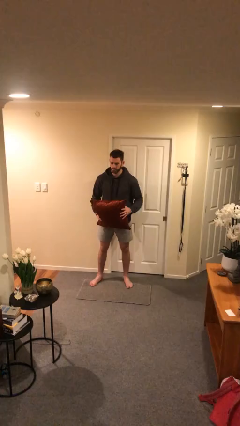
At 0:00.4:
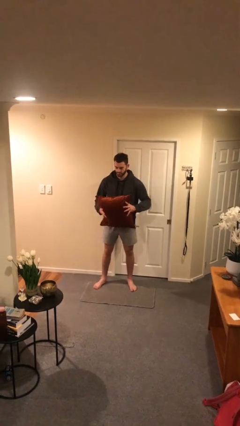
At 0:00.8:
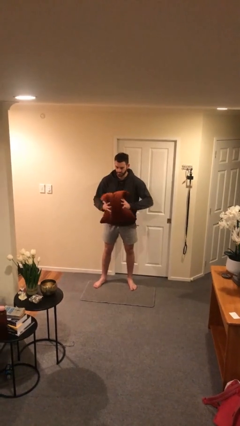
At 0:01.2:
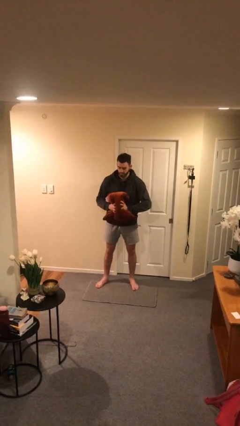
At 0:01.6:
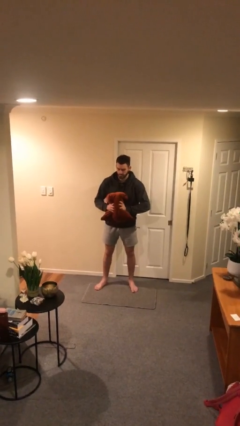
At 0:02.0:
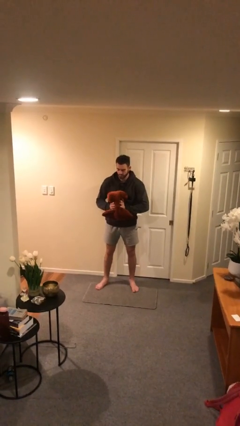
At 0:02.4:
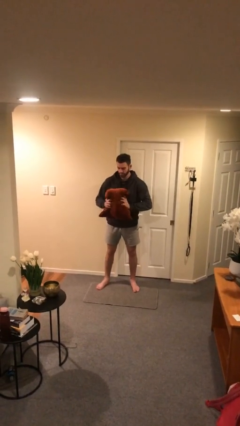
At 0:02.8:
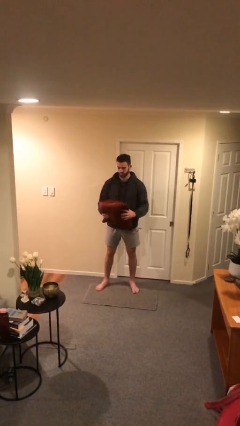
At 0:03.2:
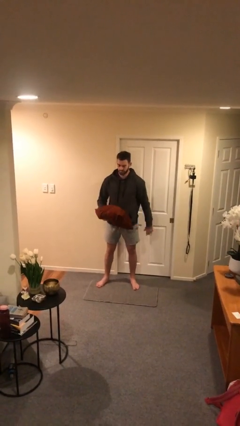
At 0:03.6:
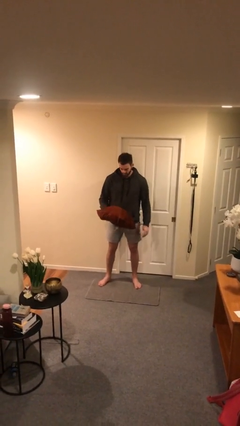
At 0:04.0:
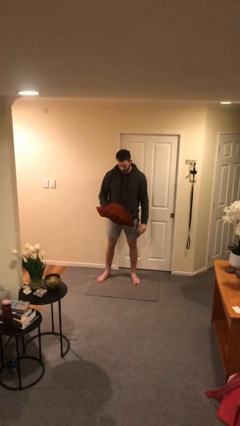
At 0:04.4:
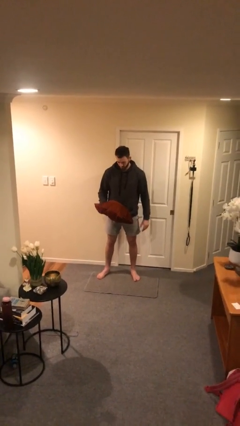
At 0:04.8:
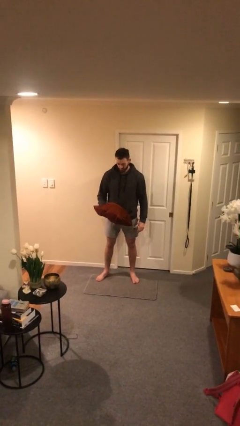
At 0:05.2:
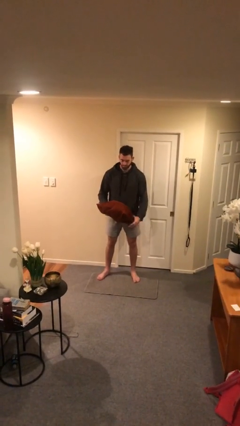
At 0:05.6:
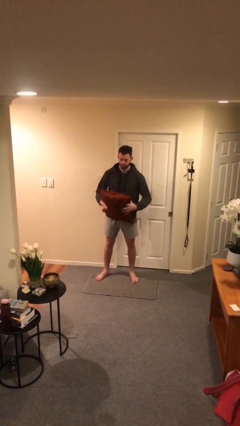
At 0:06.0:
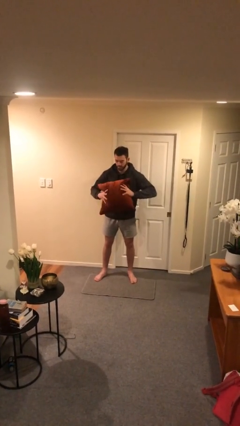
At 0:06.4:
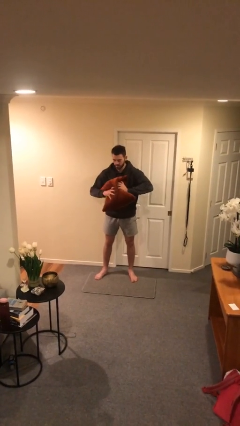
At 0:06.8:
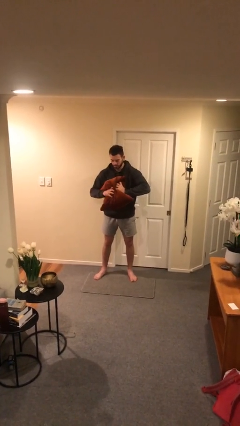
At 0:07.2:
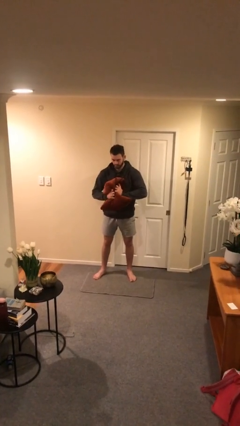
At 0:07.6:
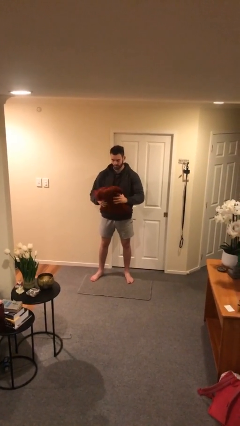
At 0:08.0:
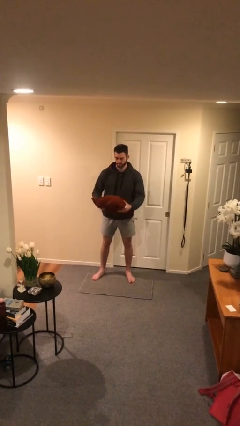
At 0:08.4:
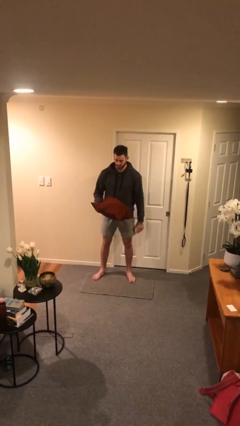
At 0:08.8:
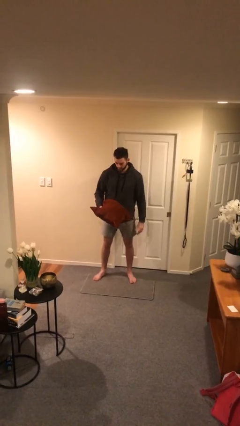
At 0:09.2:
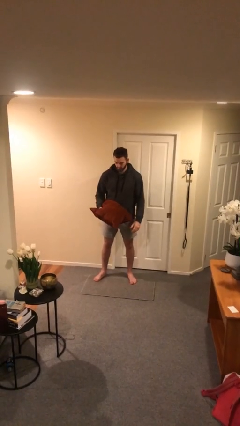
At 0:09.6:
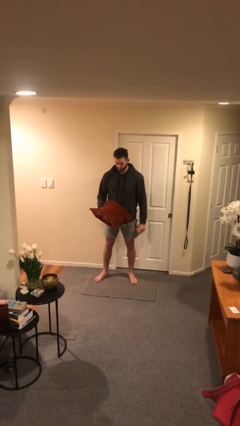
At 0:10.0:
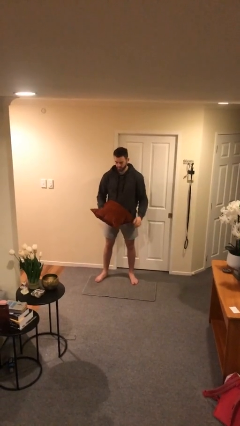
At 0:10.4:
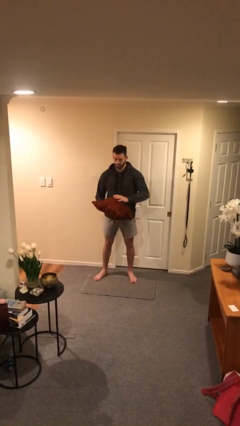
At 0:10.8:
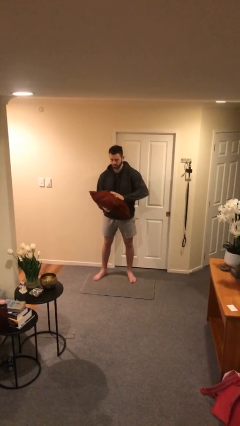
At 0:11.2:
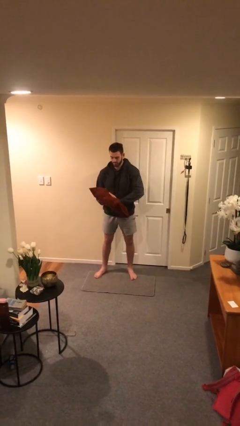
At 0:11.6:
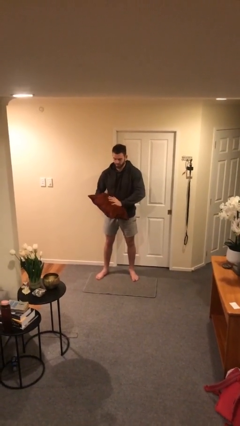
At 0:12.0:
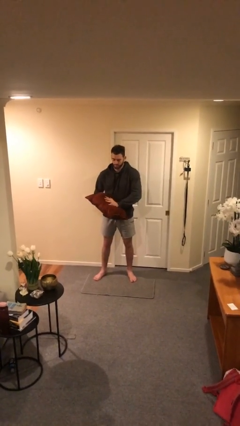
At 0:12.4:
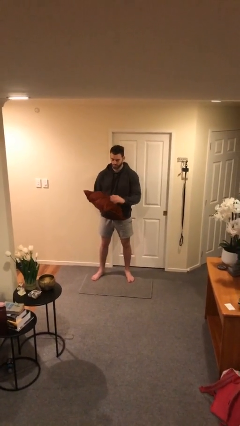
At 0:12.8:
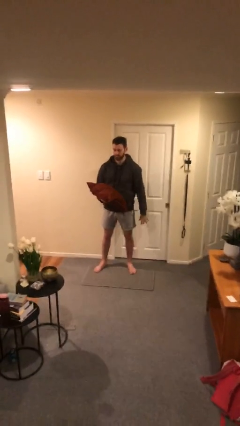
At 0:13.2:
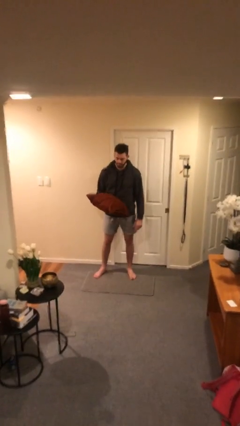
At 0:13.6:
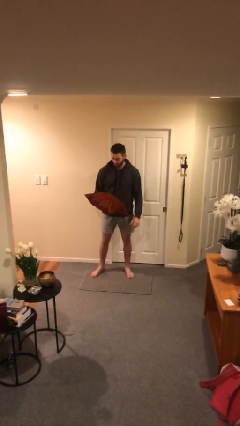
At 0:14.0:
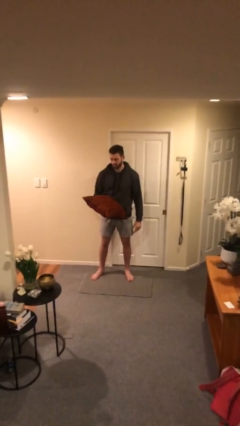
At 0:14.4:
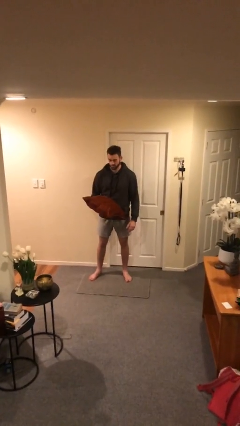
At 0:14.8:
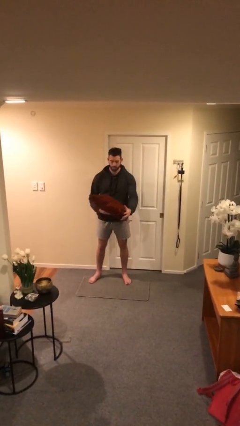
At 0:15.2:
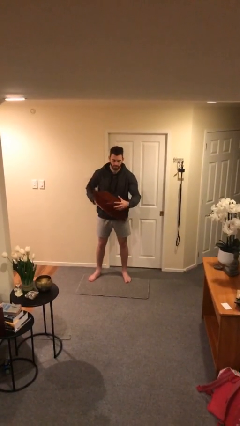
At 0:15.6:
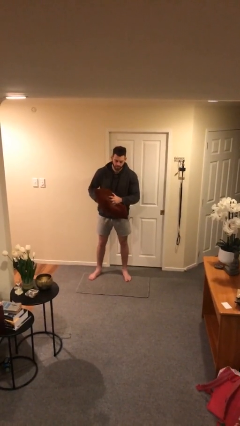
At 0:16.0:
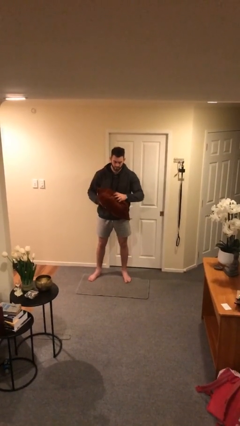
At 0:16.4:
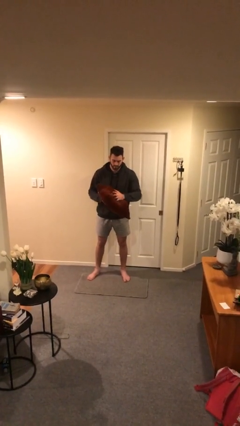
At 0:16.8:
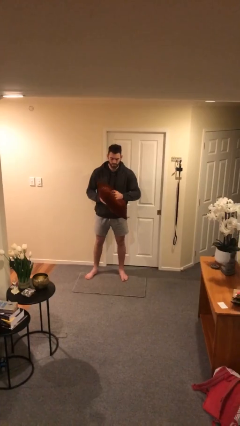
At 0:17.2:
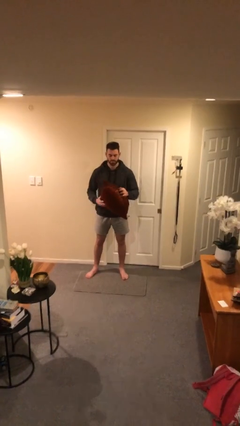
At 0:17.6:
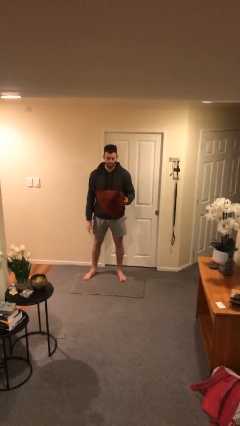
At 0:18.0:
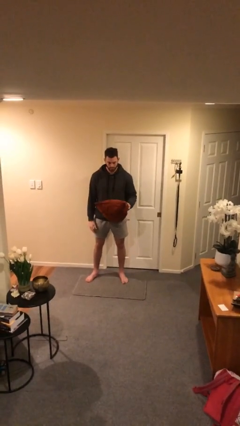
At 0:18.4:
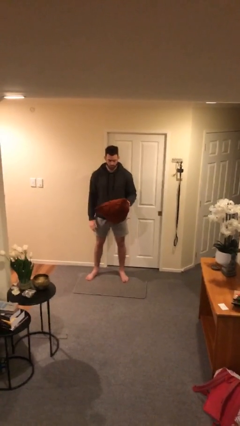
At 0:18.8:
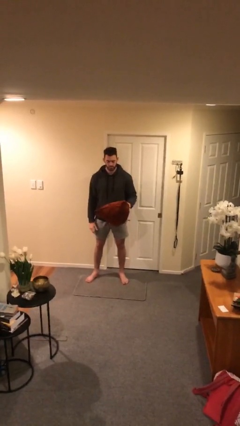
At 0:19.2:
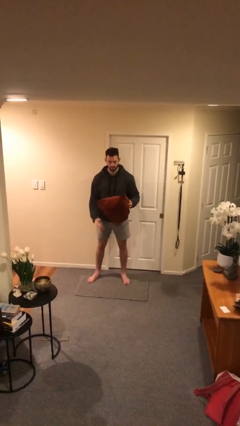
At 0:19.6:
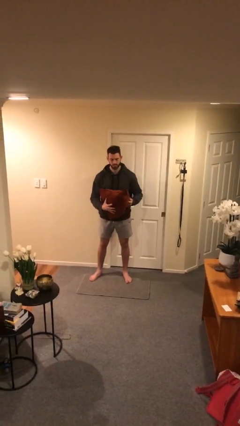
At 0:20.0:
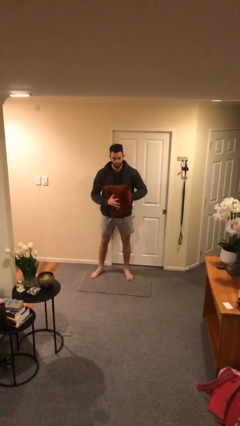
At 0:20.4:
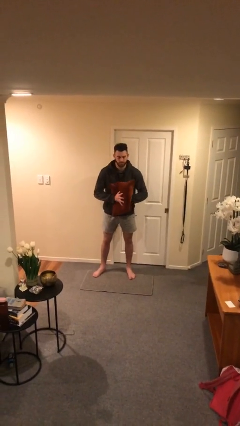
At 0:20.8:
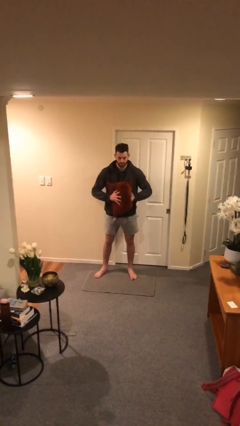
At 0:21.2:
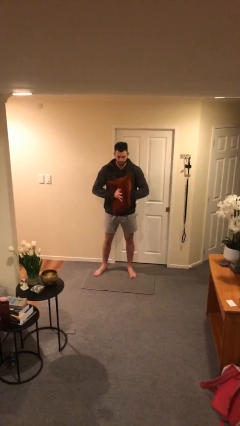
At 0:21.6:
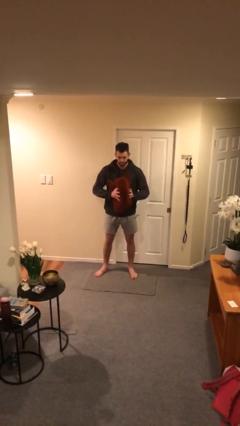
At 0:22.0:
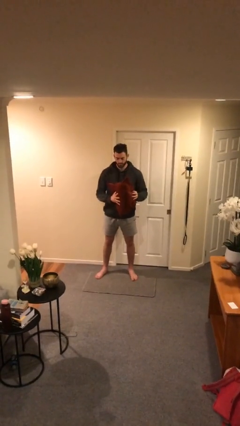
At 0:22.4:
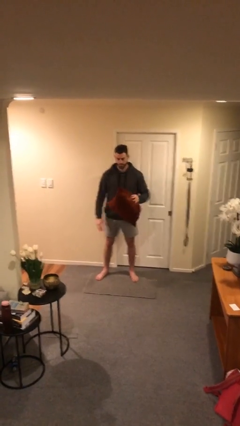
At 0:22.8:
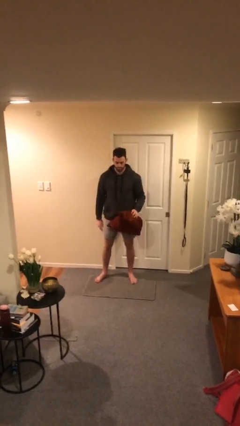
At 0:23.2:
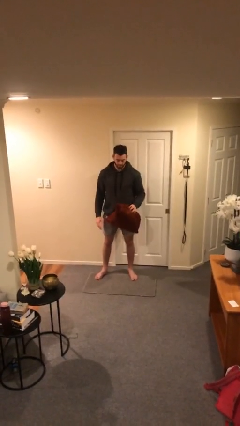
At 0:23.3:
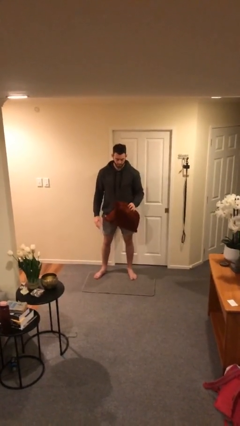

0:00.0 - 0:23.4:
person squeezes object

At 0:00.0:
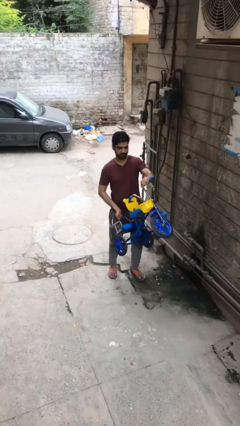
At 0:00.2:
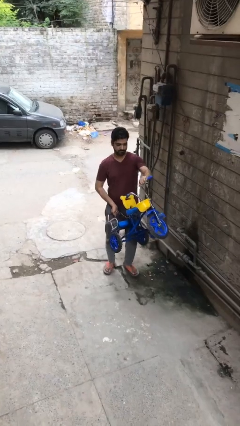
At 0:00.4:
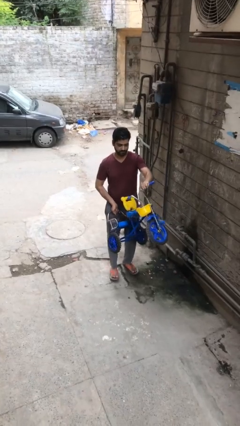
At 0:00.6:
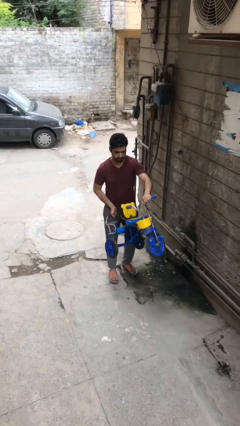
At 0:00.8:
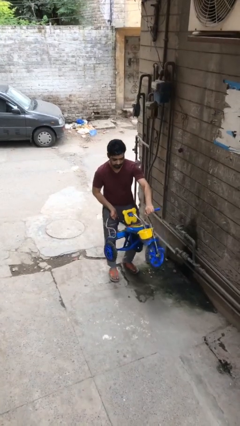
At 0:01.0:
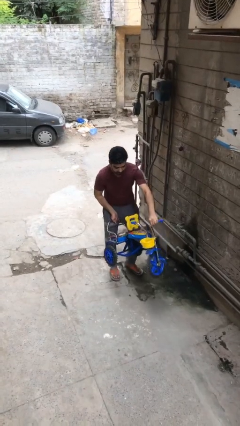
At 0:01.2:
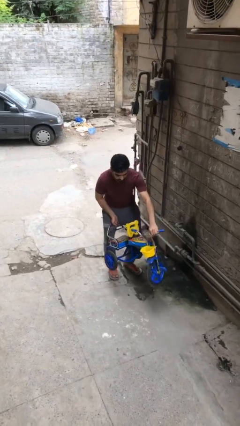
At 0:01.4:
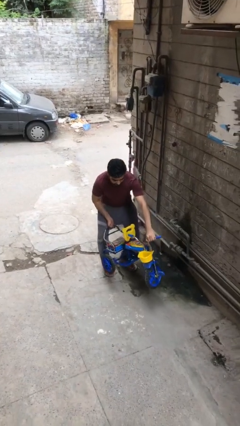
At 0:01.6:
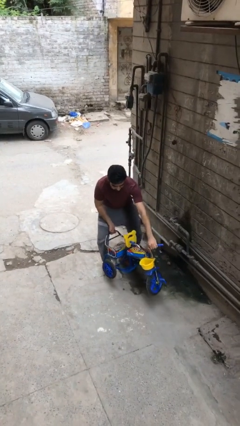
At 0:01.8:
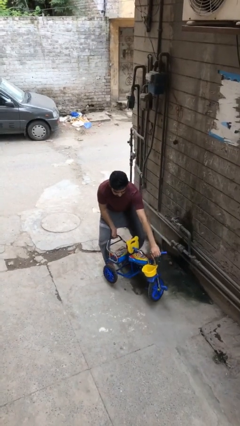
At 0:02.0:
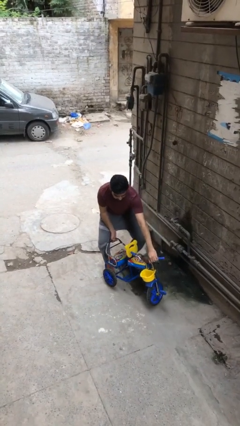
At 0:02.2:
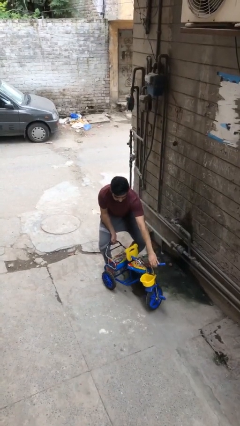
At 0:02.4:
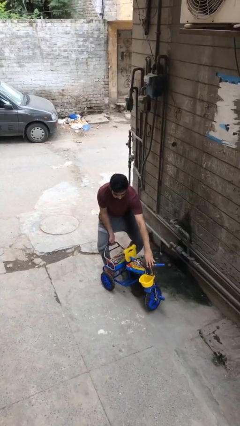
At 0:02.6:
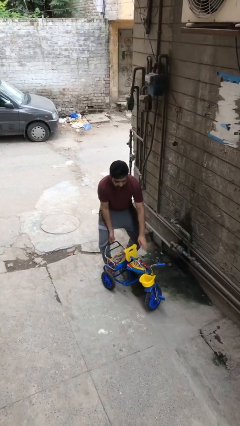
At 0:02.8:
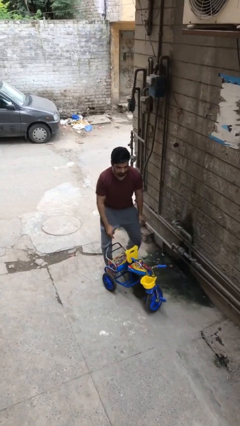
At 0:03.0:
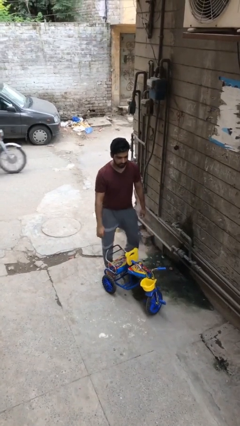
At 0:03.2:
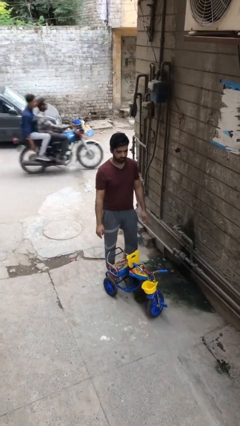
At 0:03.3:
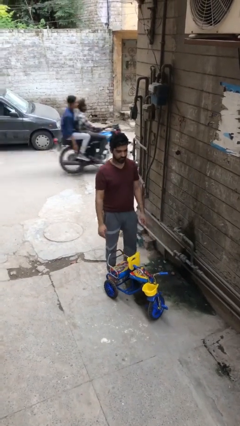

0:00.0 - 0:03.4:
person puts down object on floor

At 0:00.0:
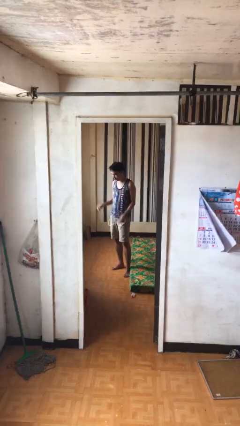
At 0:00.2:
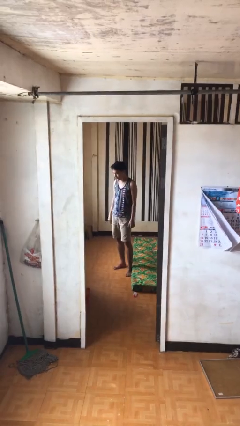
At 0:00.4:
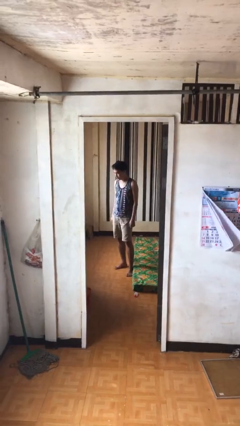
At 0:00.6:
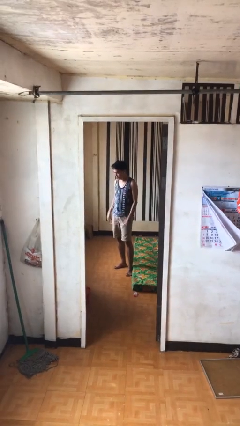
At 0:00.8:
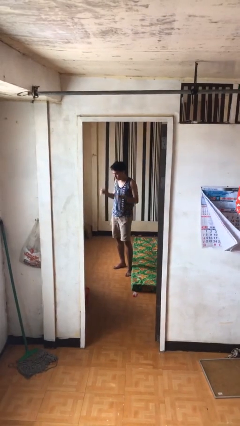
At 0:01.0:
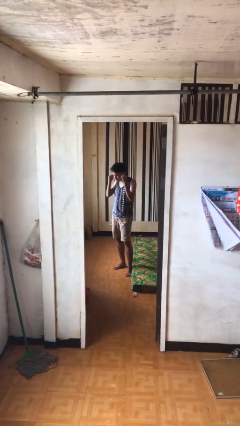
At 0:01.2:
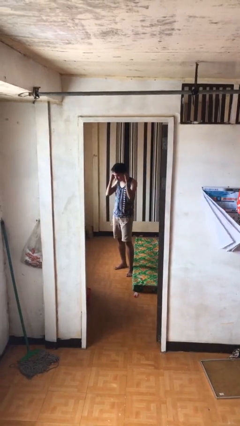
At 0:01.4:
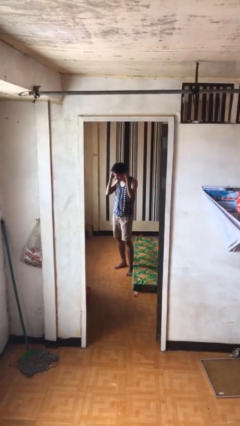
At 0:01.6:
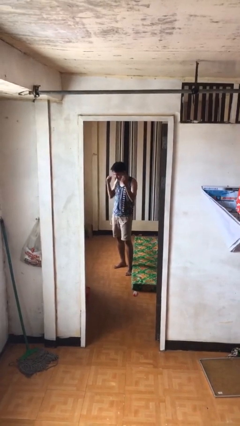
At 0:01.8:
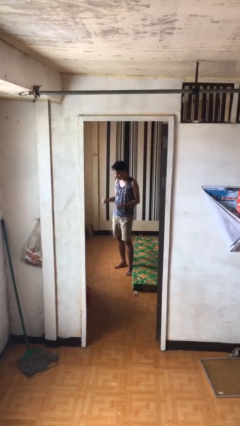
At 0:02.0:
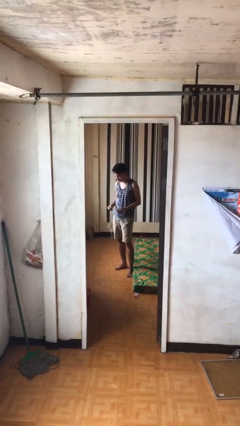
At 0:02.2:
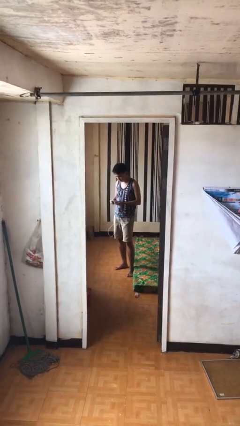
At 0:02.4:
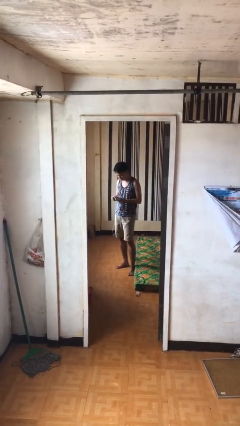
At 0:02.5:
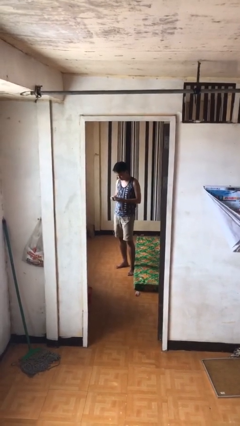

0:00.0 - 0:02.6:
person takes off headphones
